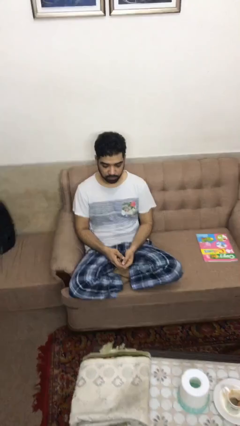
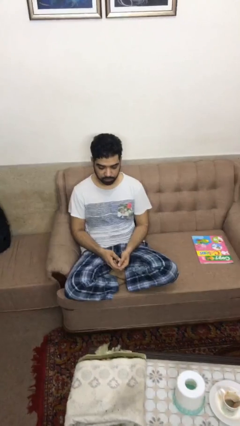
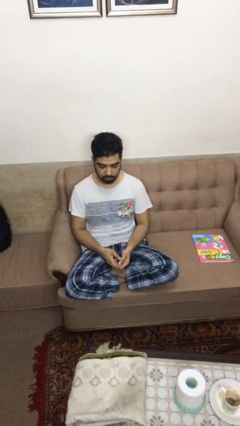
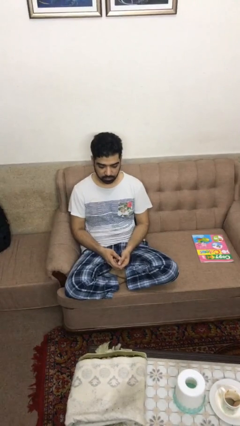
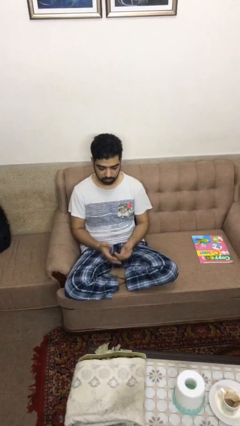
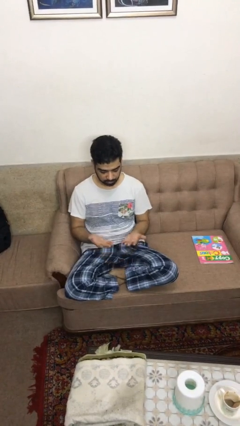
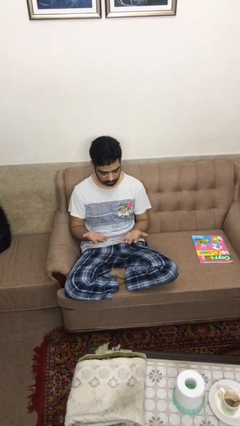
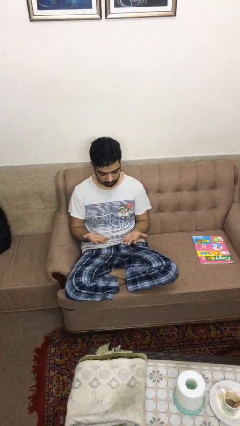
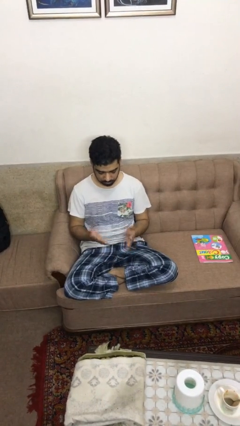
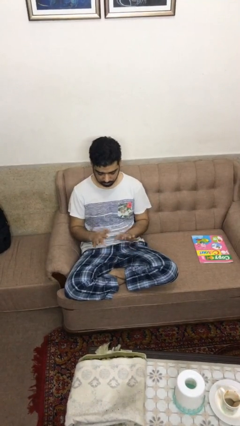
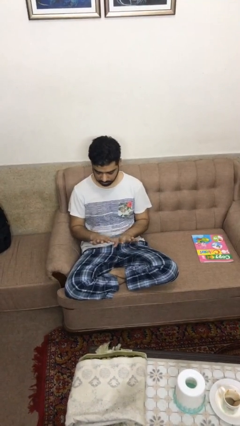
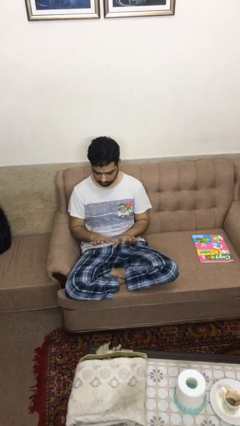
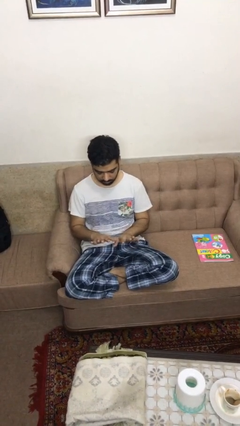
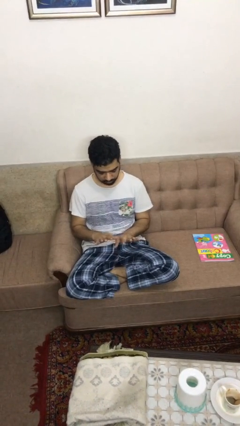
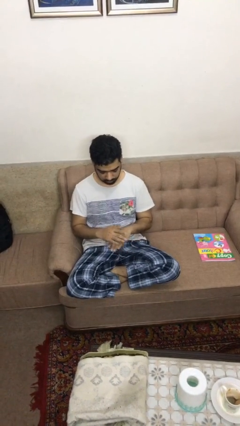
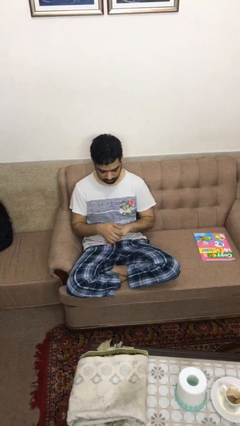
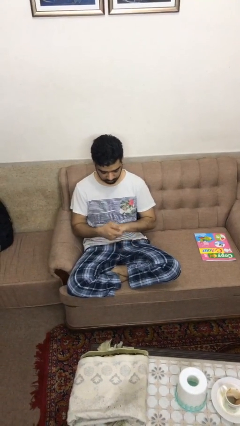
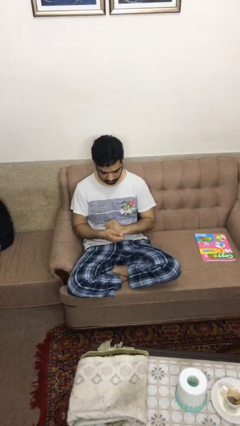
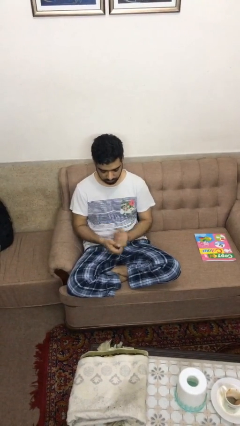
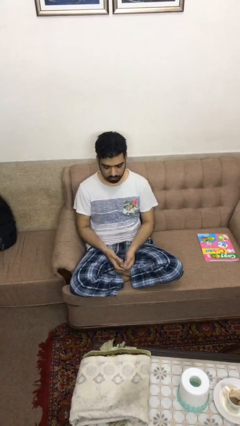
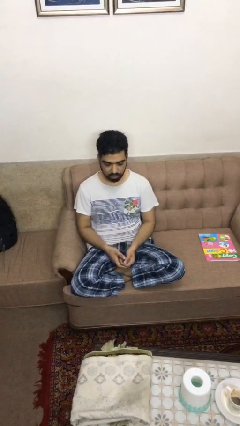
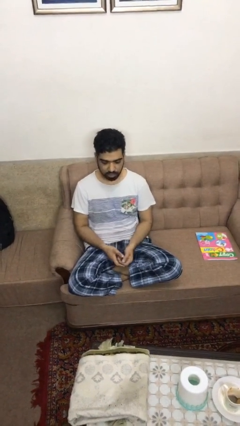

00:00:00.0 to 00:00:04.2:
person looks at hands in lap

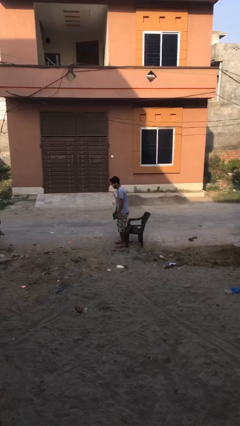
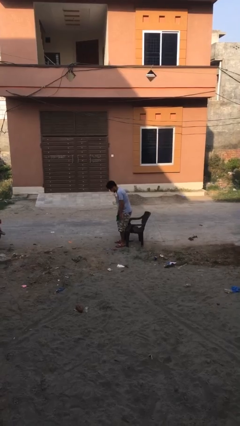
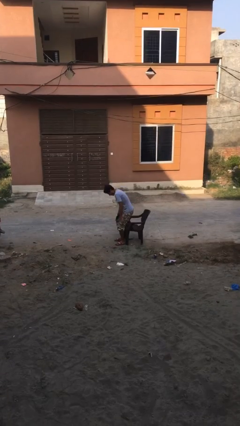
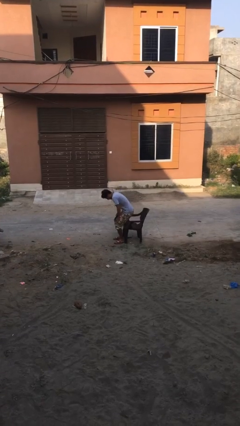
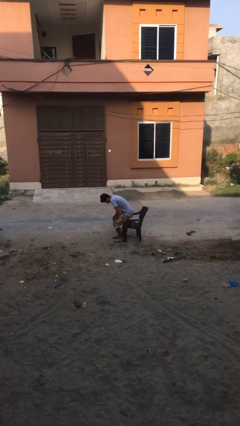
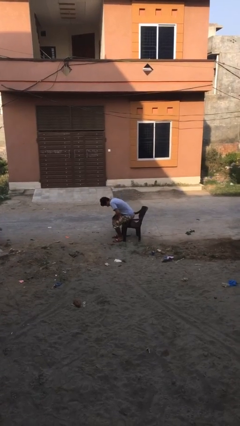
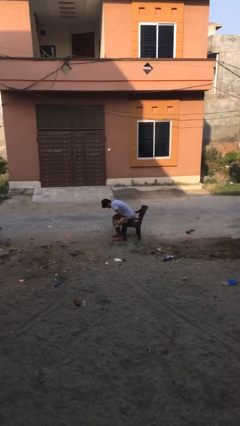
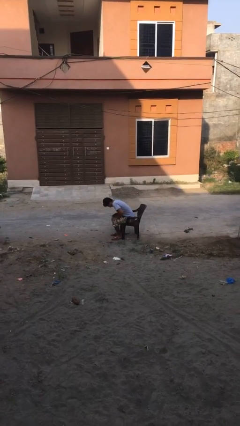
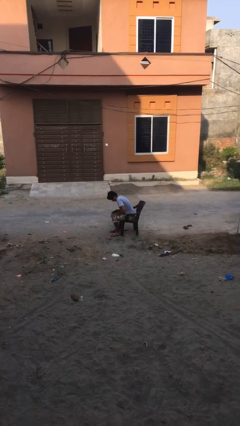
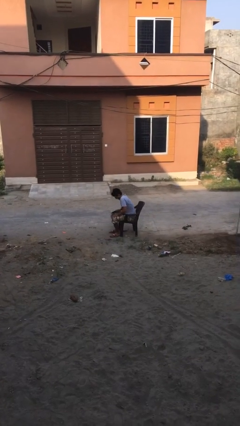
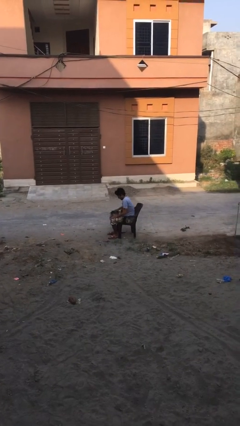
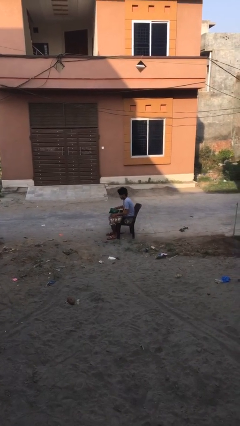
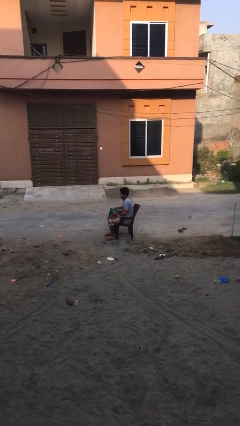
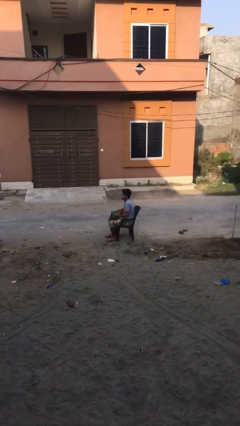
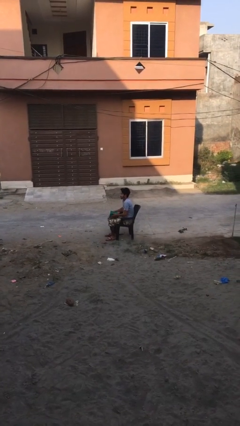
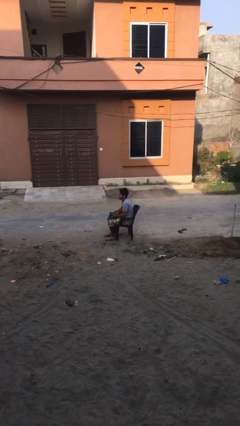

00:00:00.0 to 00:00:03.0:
person sits down

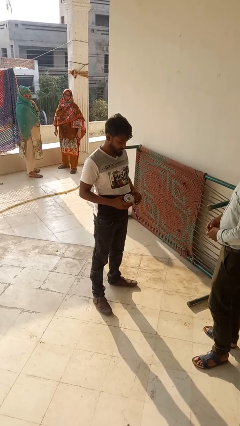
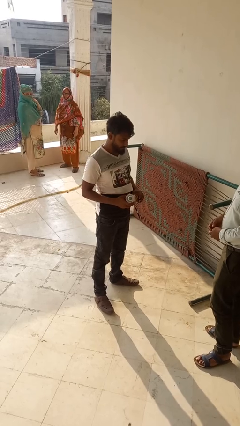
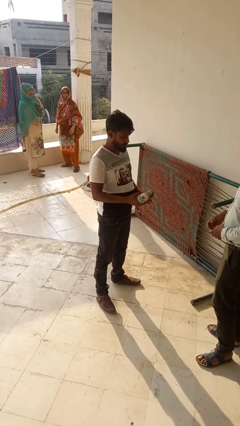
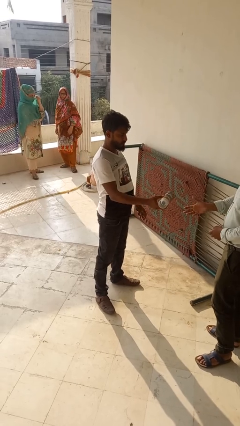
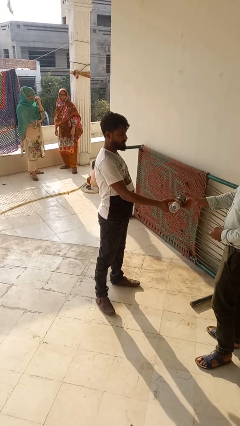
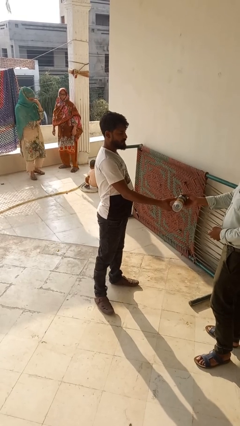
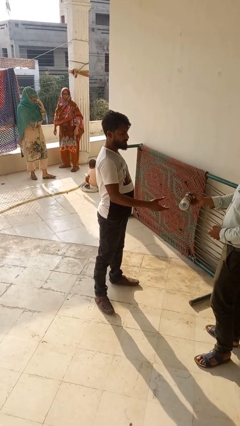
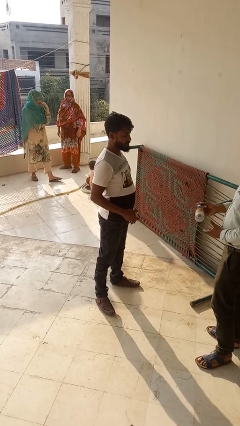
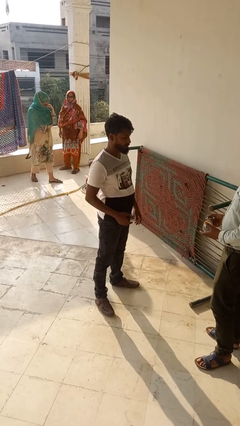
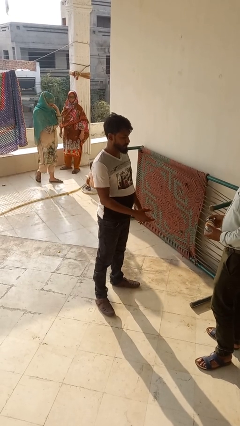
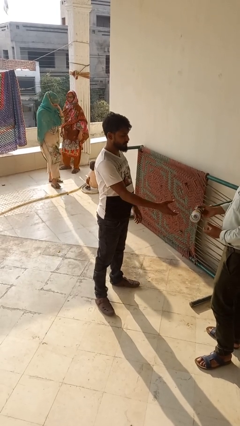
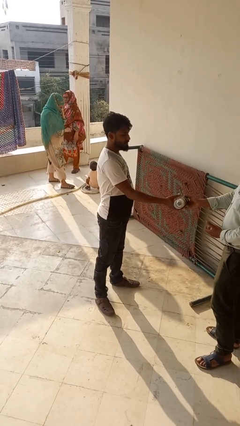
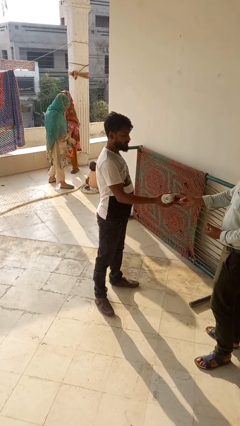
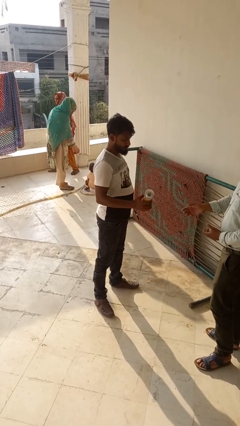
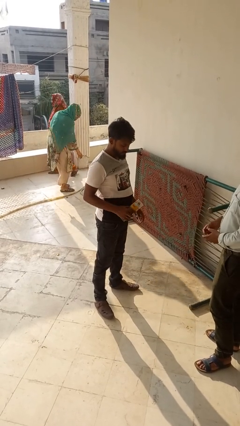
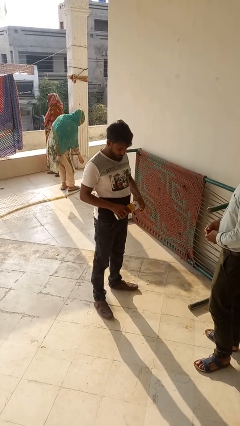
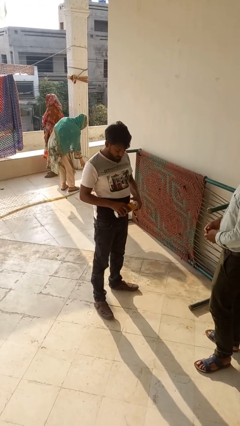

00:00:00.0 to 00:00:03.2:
person transfers object to person

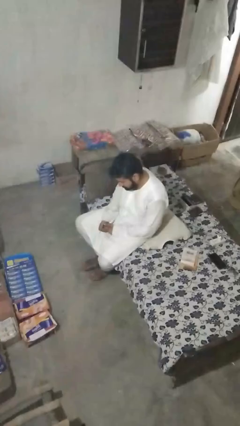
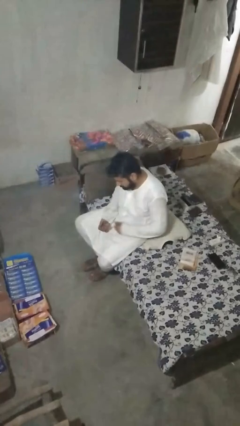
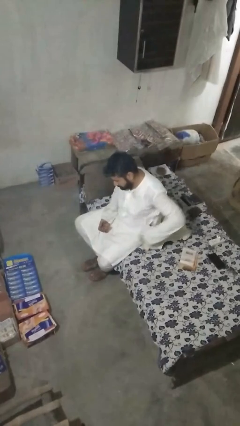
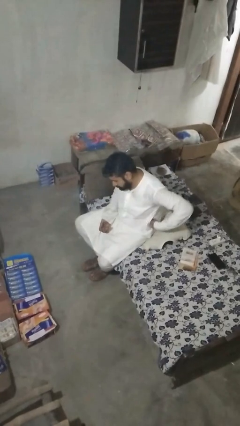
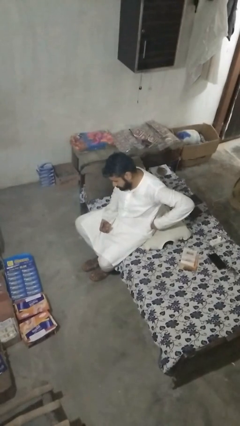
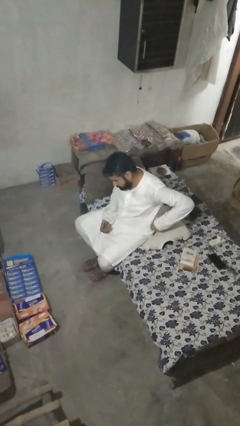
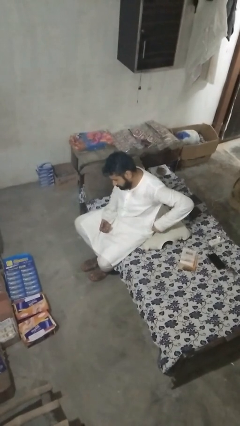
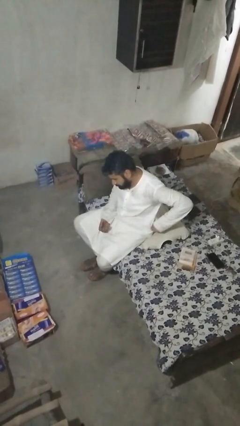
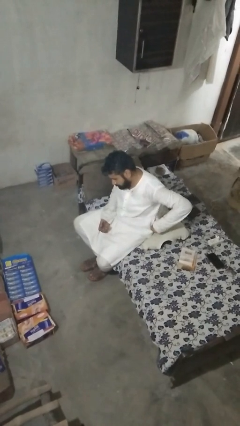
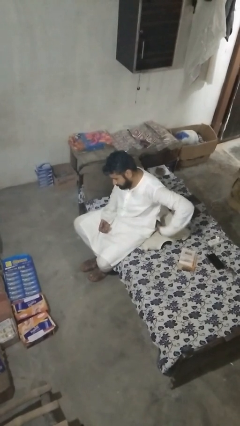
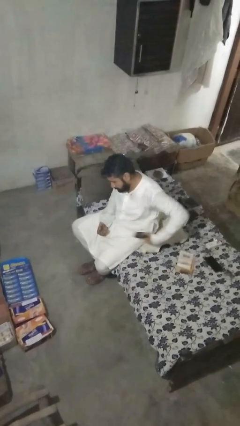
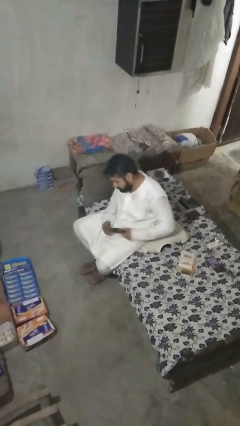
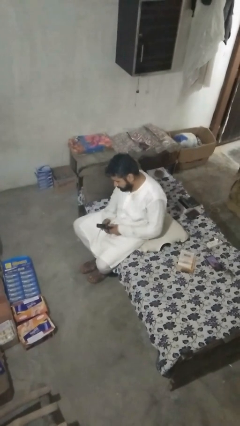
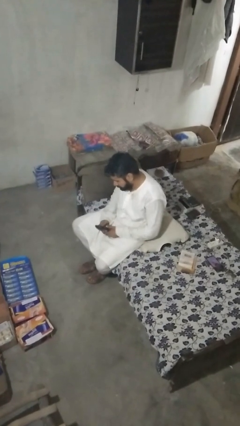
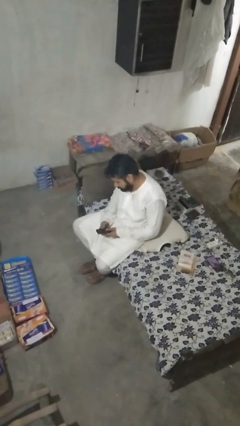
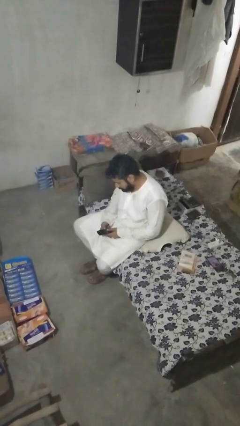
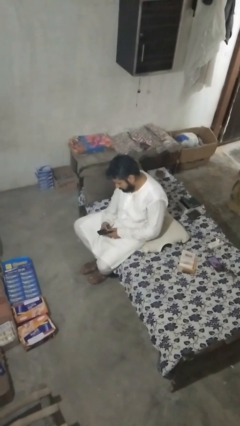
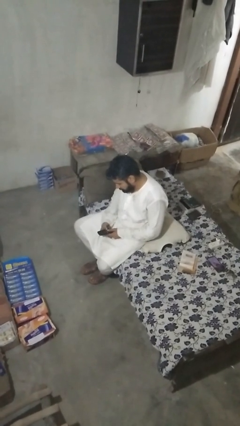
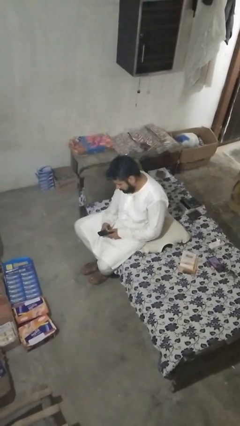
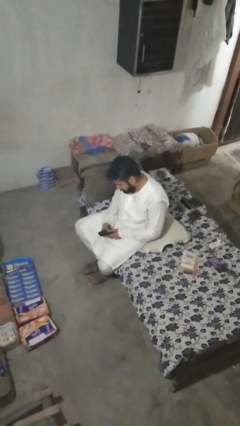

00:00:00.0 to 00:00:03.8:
person takes phone from pocket

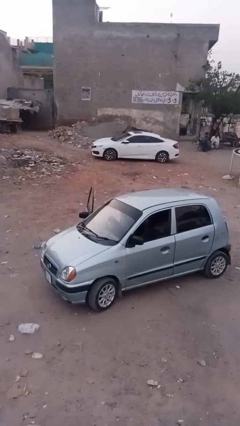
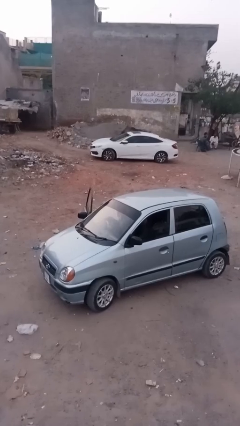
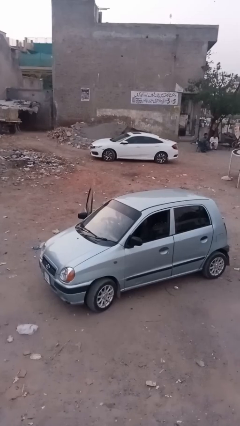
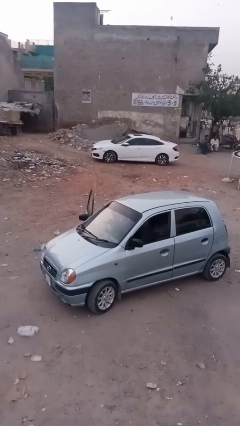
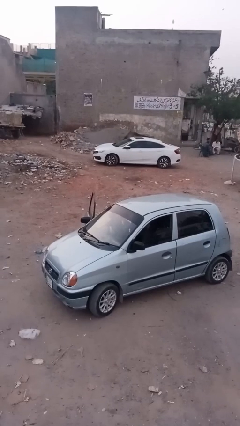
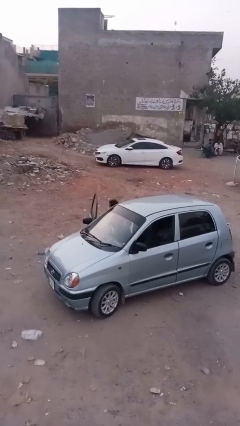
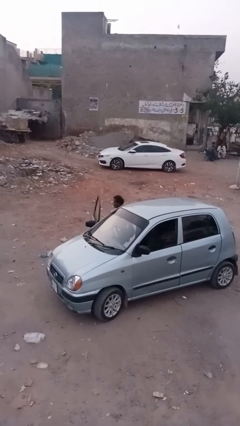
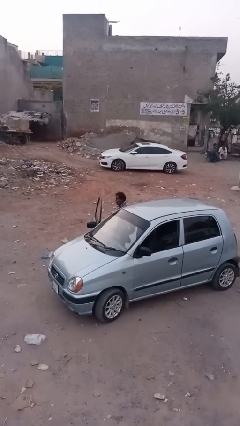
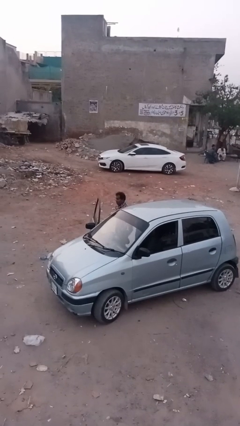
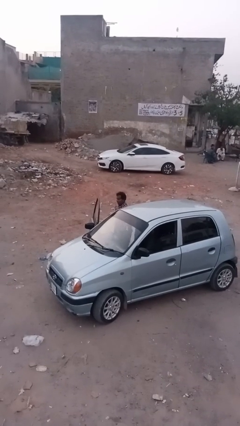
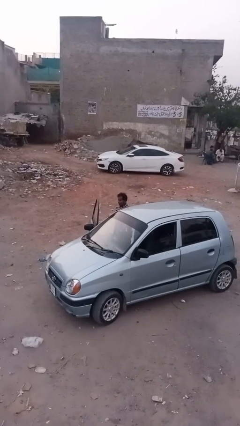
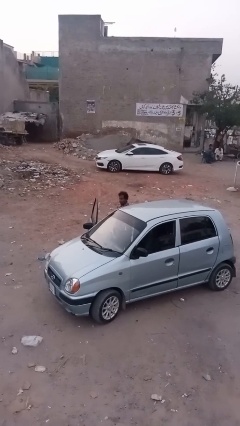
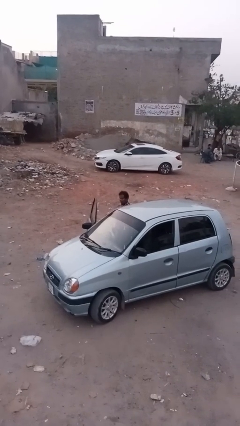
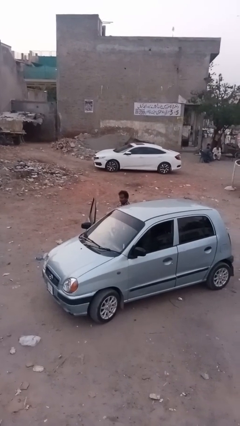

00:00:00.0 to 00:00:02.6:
person exits car

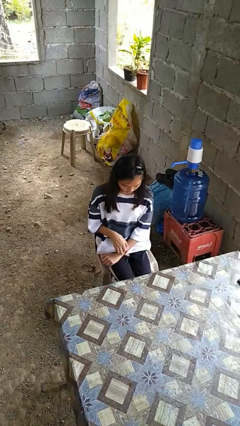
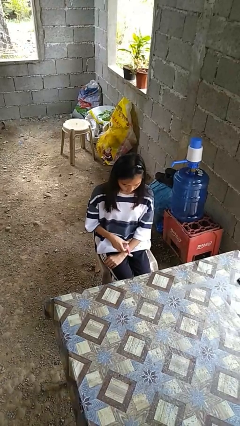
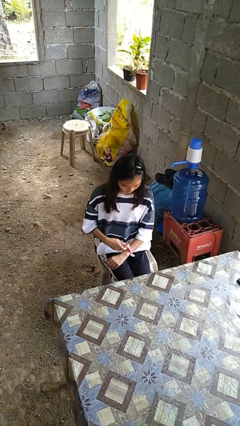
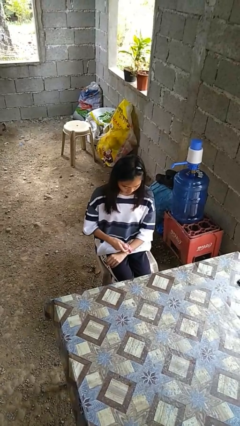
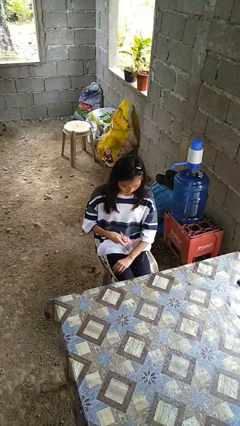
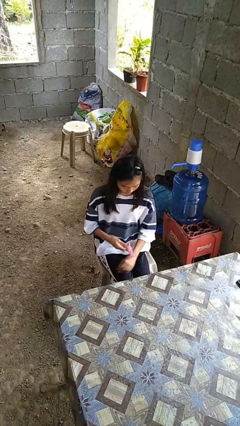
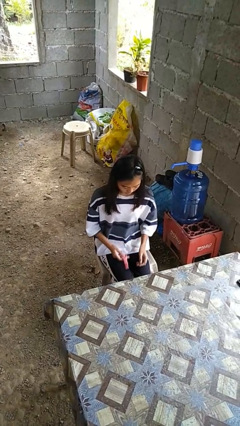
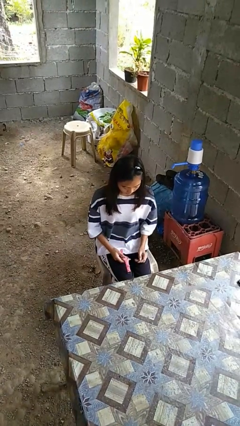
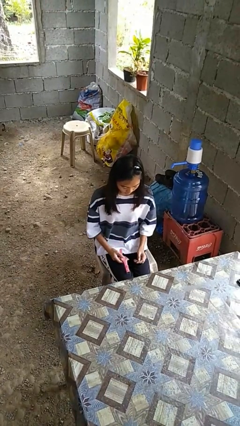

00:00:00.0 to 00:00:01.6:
person takes off wristwatch
